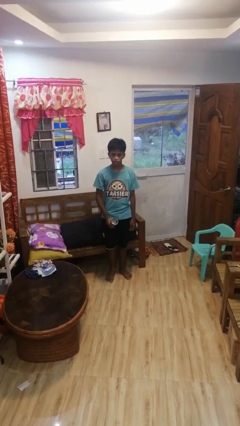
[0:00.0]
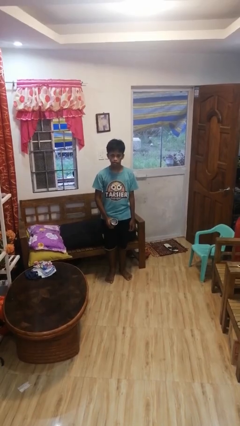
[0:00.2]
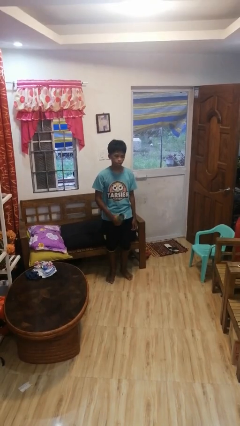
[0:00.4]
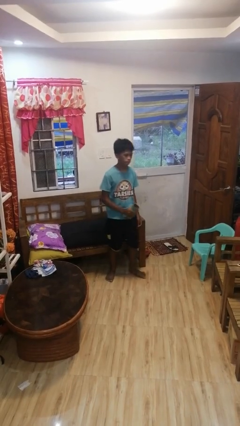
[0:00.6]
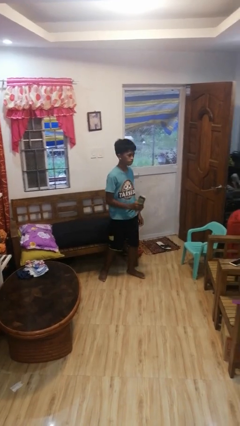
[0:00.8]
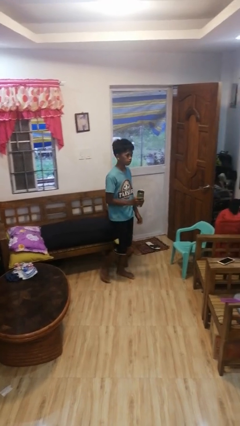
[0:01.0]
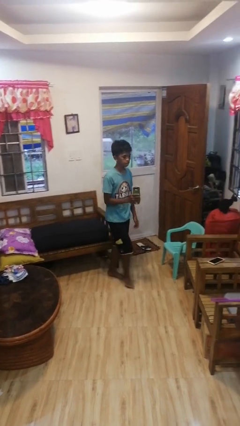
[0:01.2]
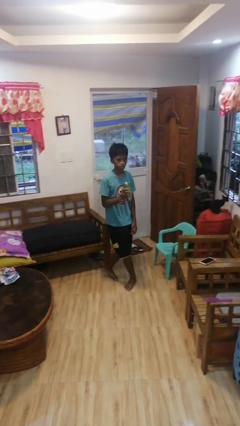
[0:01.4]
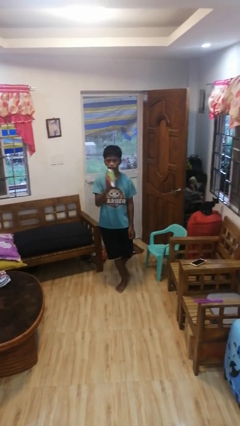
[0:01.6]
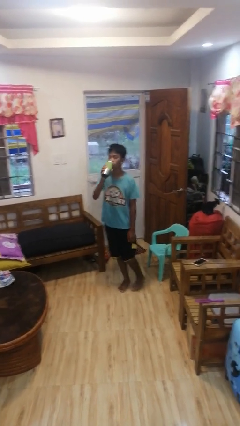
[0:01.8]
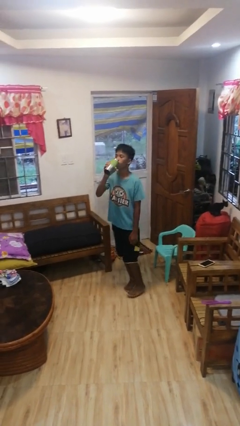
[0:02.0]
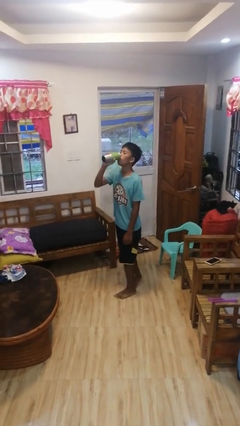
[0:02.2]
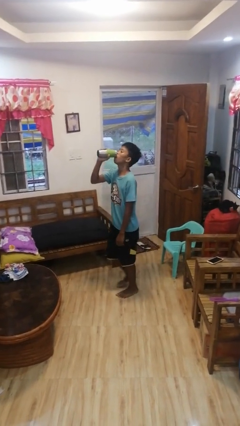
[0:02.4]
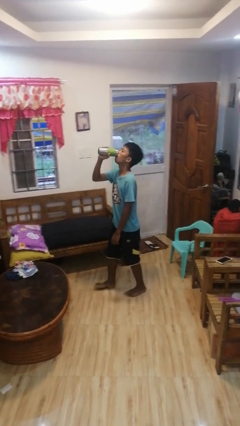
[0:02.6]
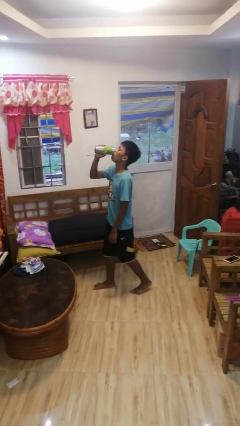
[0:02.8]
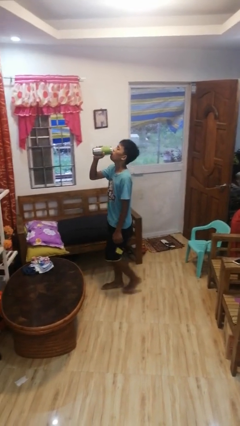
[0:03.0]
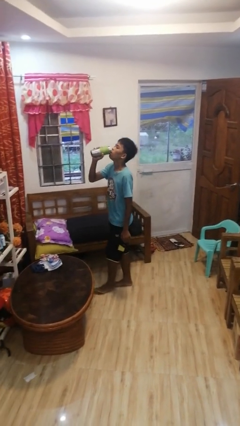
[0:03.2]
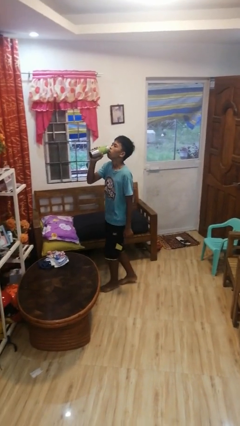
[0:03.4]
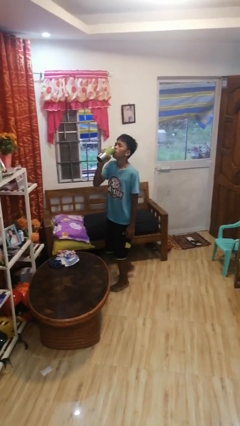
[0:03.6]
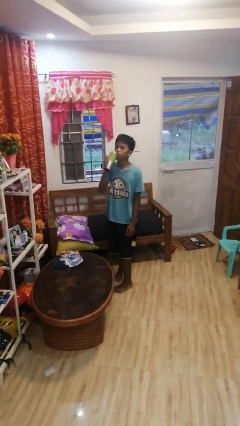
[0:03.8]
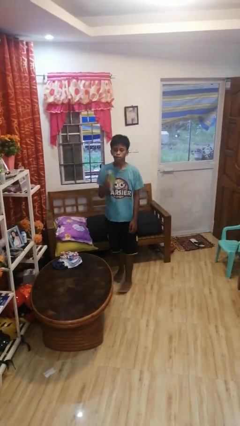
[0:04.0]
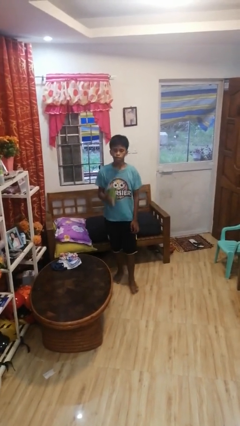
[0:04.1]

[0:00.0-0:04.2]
person drinks from bottle

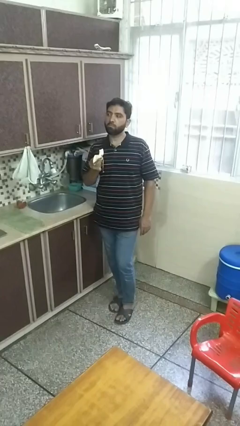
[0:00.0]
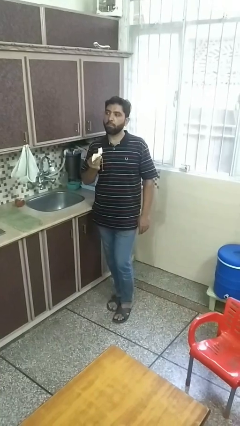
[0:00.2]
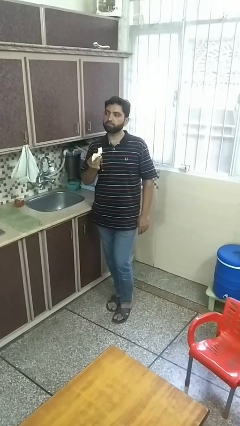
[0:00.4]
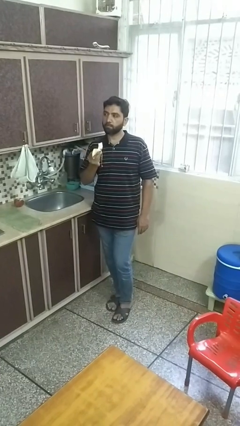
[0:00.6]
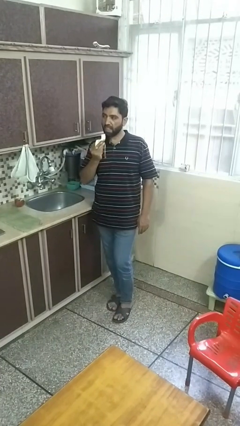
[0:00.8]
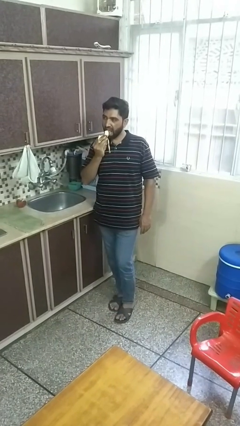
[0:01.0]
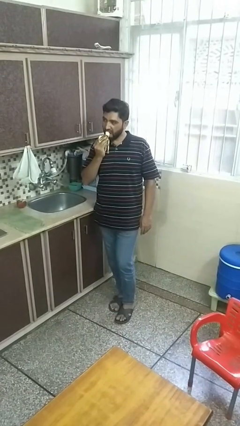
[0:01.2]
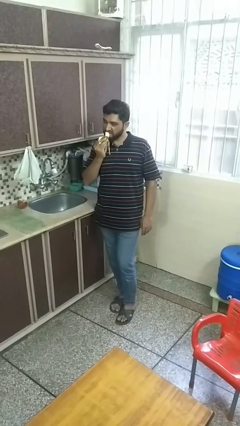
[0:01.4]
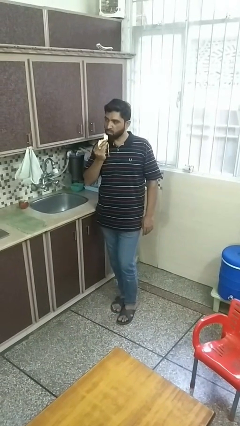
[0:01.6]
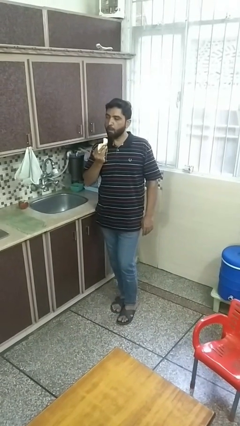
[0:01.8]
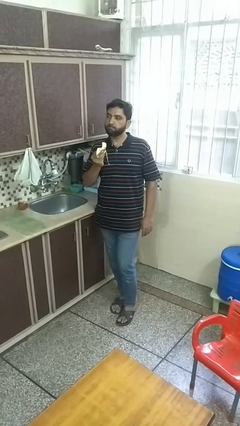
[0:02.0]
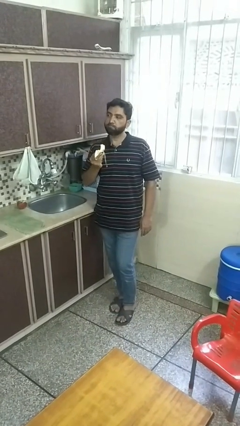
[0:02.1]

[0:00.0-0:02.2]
person eats banana

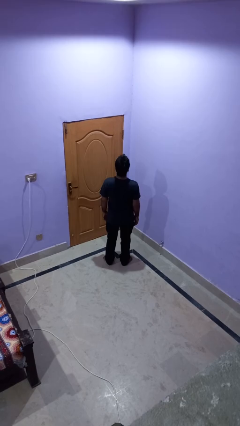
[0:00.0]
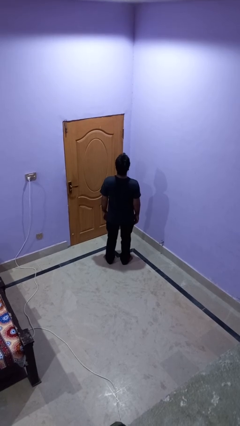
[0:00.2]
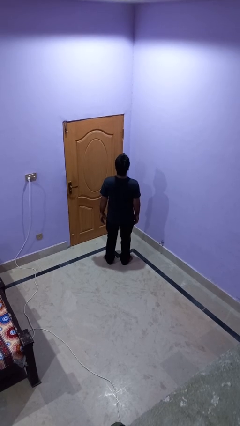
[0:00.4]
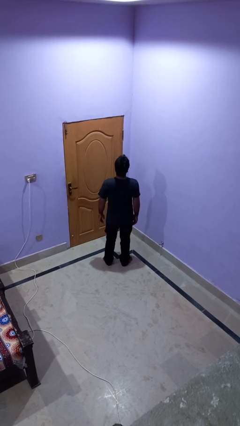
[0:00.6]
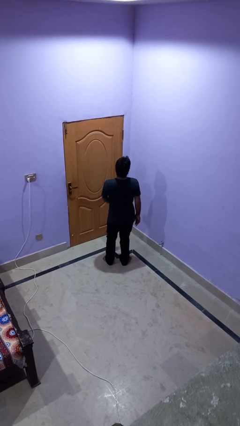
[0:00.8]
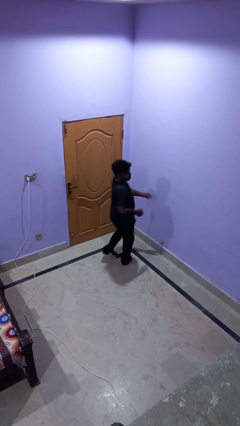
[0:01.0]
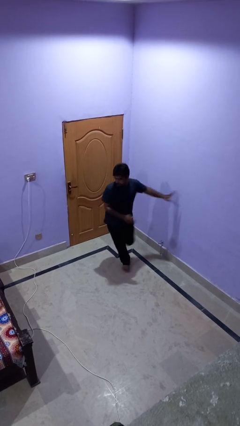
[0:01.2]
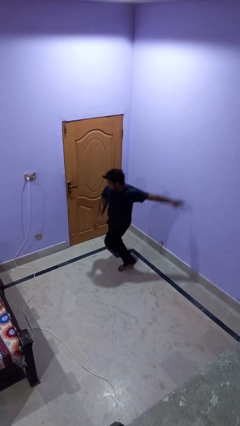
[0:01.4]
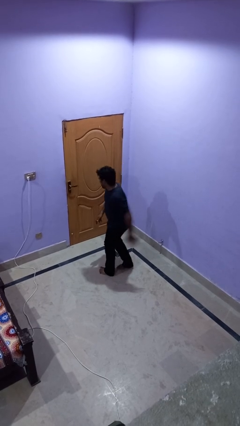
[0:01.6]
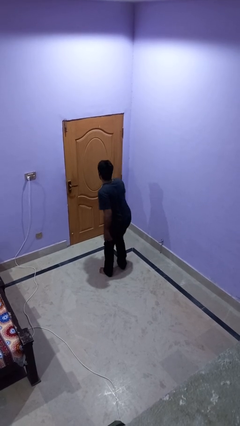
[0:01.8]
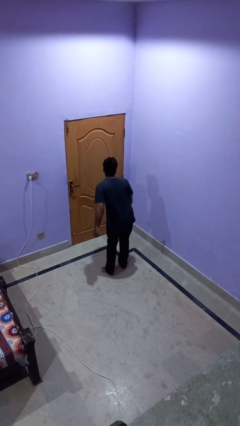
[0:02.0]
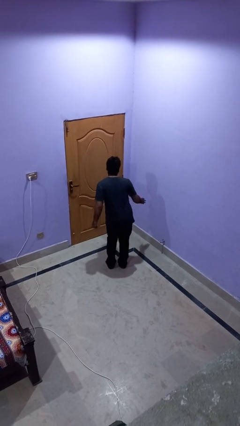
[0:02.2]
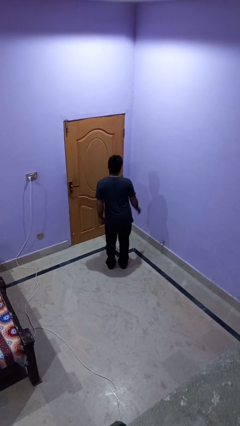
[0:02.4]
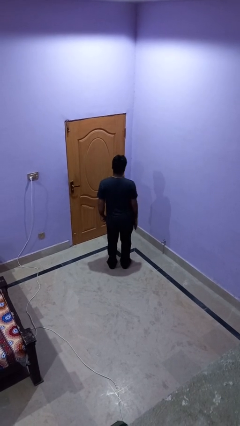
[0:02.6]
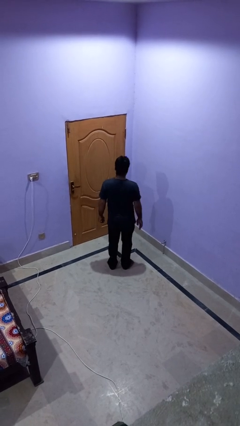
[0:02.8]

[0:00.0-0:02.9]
person twirls

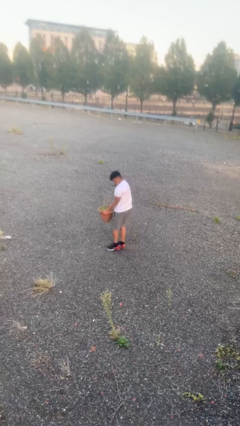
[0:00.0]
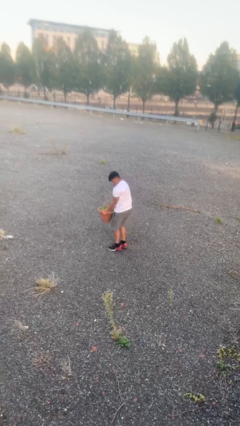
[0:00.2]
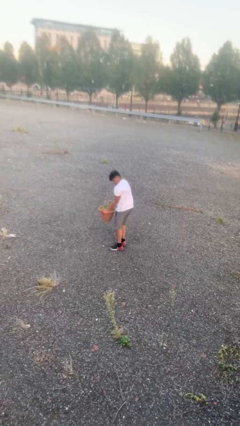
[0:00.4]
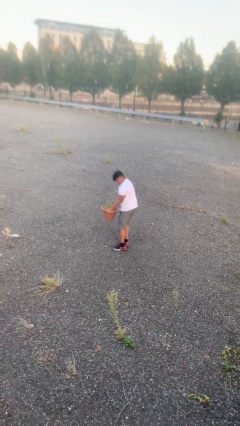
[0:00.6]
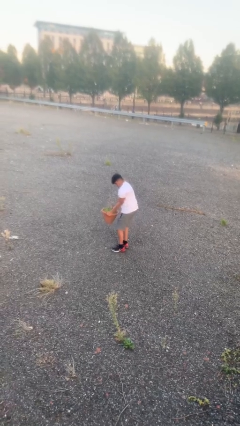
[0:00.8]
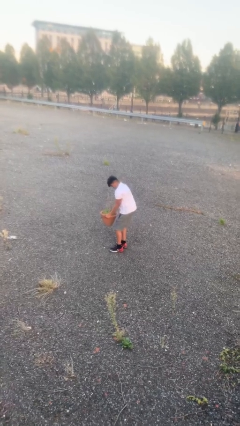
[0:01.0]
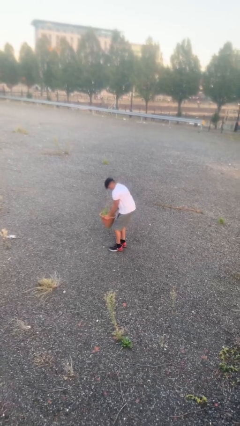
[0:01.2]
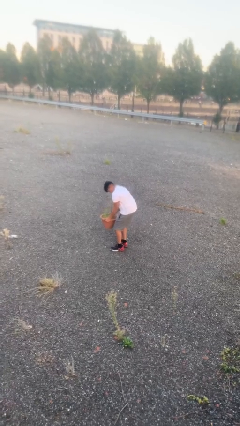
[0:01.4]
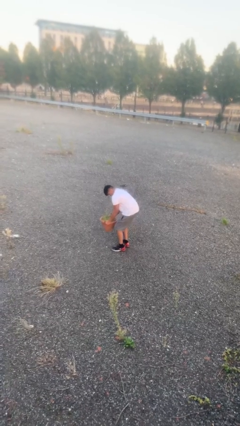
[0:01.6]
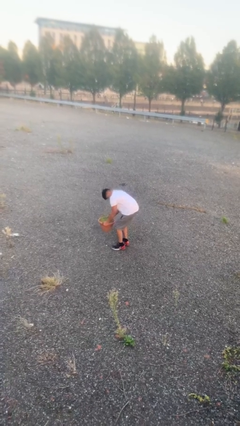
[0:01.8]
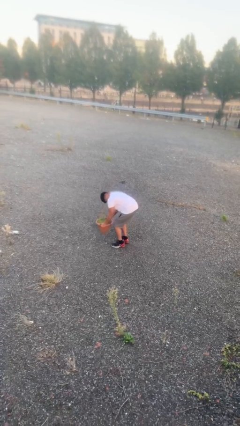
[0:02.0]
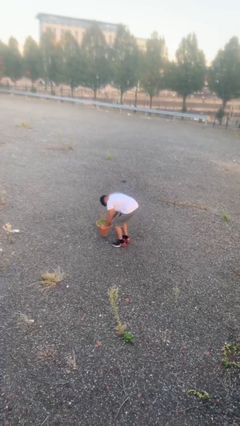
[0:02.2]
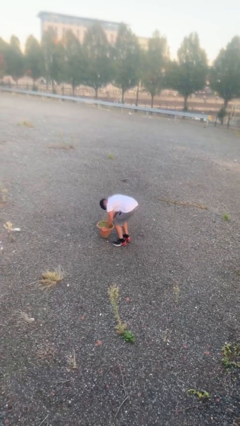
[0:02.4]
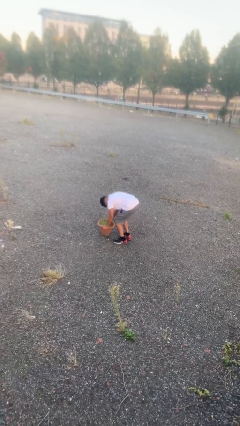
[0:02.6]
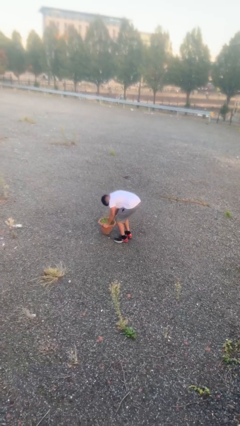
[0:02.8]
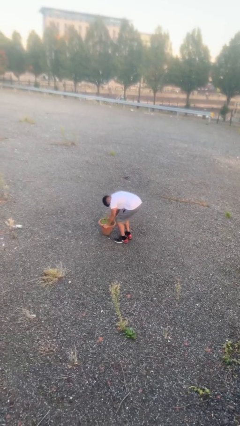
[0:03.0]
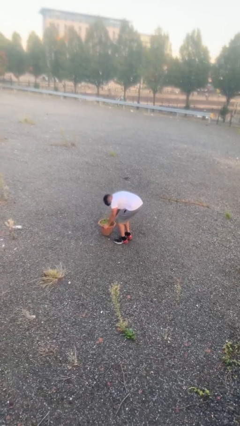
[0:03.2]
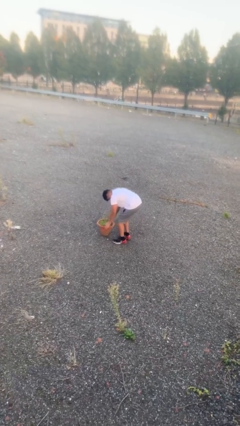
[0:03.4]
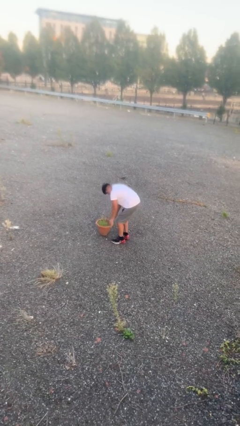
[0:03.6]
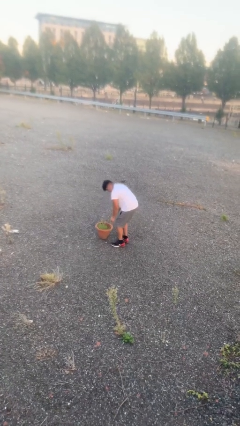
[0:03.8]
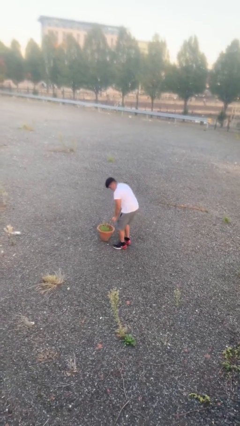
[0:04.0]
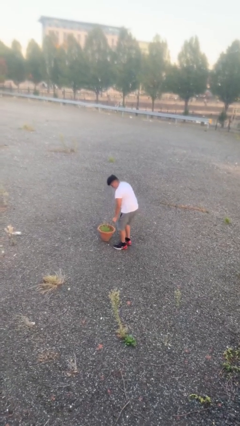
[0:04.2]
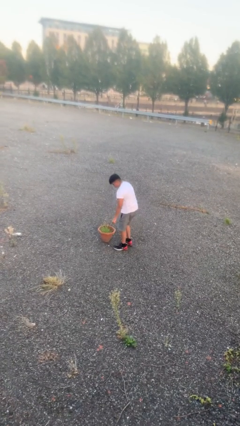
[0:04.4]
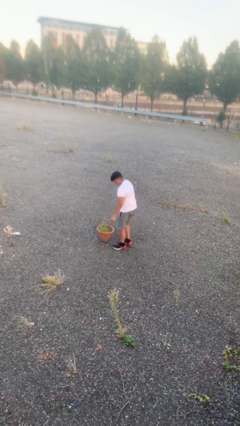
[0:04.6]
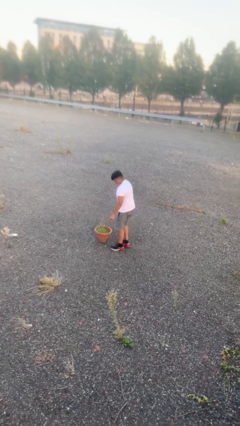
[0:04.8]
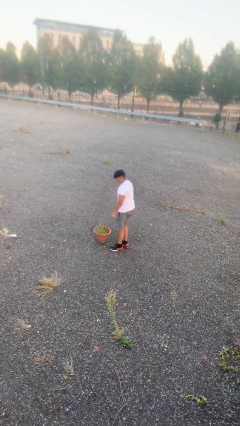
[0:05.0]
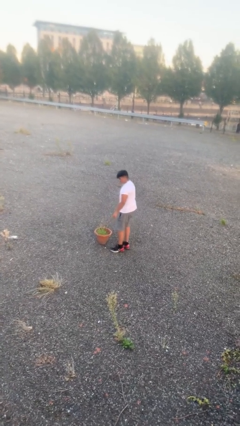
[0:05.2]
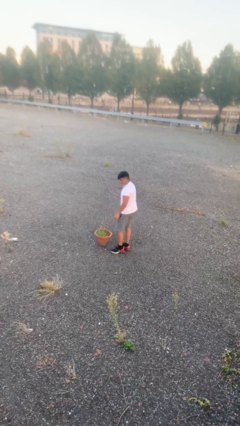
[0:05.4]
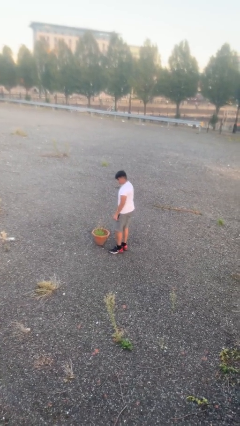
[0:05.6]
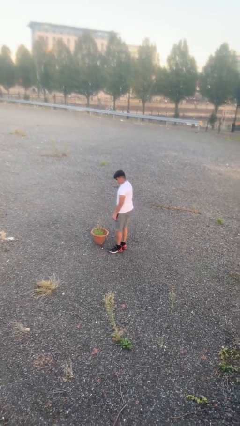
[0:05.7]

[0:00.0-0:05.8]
person puts down object on floor

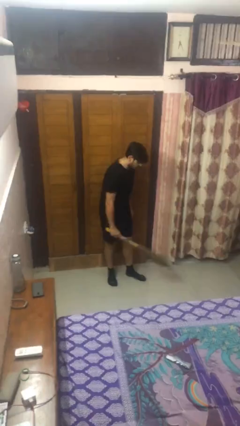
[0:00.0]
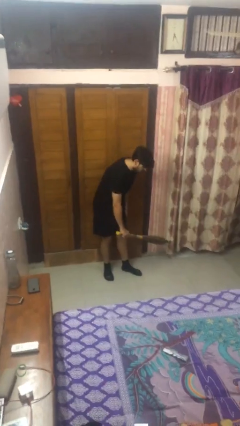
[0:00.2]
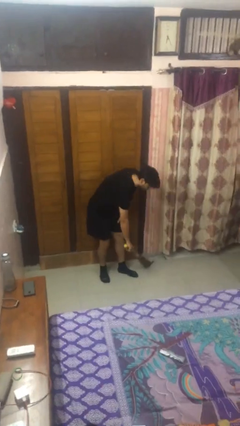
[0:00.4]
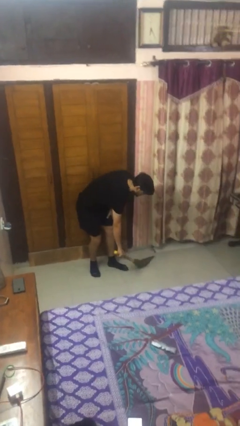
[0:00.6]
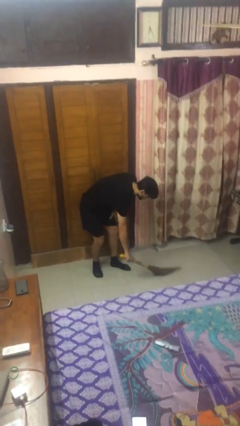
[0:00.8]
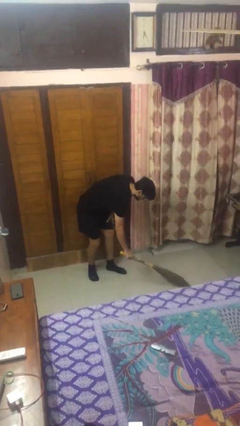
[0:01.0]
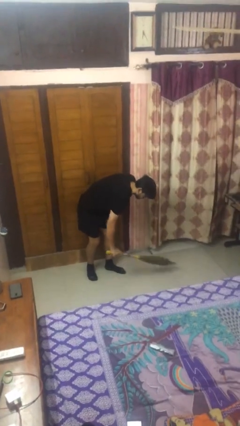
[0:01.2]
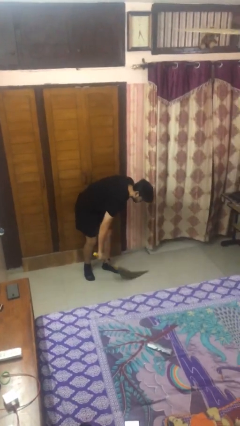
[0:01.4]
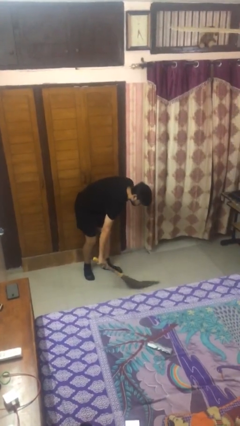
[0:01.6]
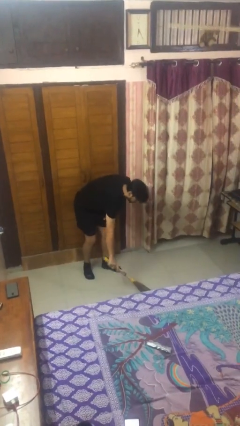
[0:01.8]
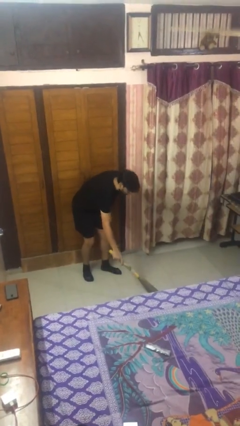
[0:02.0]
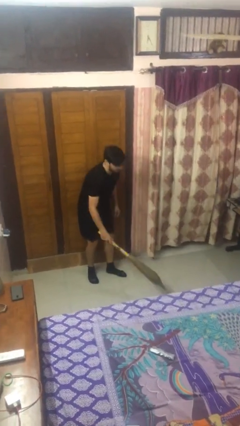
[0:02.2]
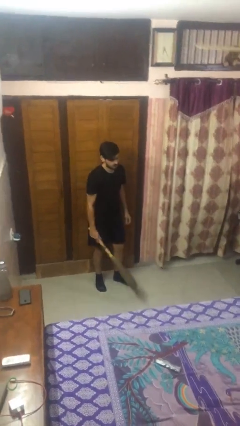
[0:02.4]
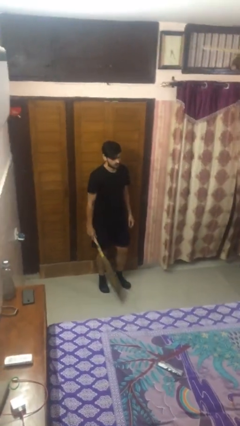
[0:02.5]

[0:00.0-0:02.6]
person sweeps floor

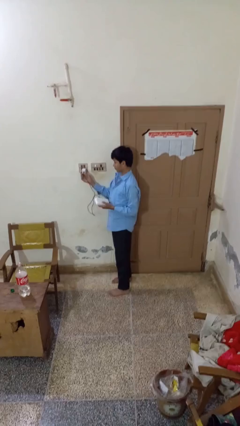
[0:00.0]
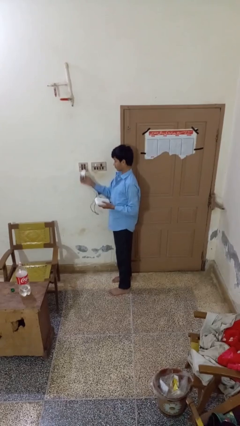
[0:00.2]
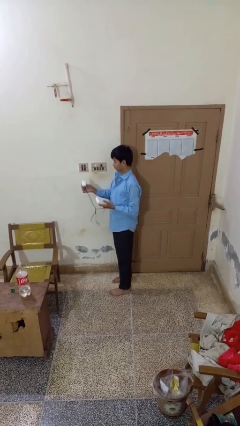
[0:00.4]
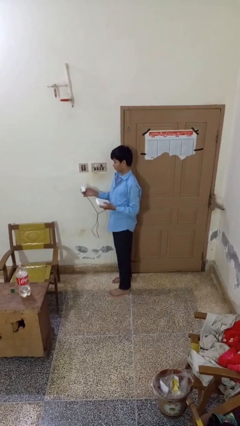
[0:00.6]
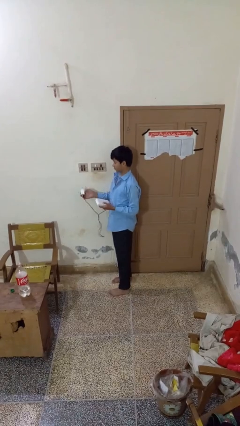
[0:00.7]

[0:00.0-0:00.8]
person unplugs from electrical socket
